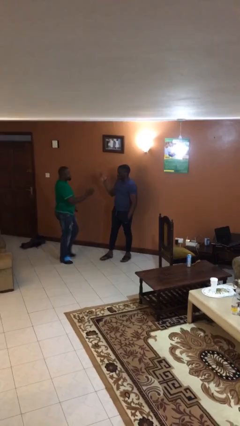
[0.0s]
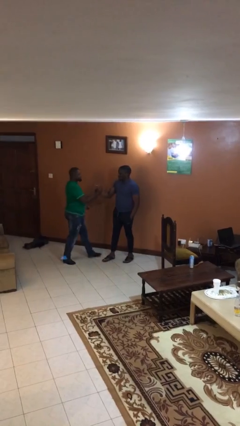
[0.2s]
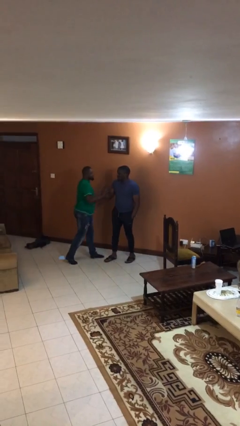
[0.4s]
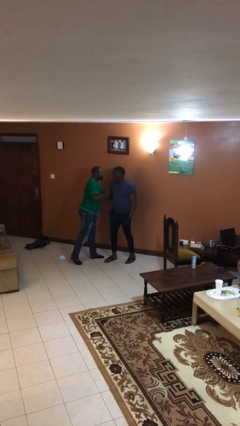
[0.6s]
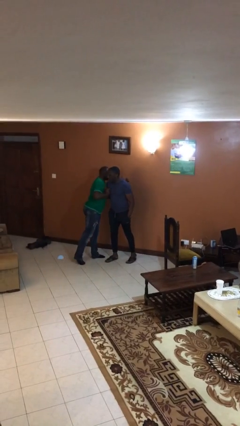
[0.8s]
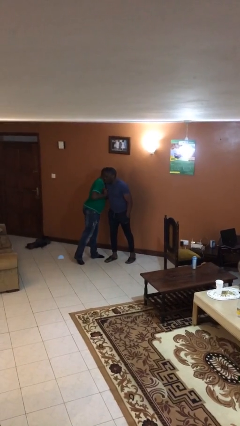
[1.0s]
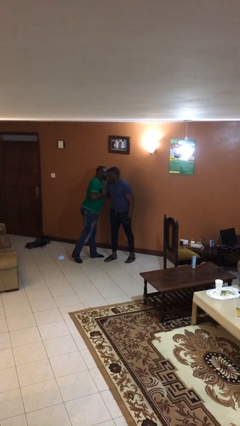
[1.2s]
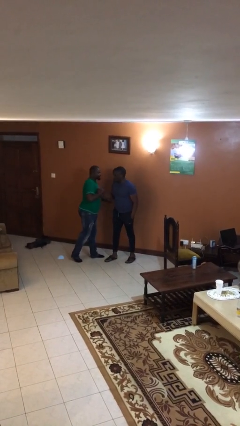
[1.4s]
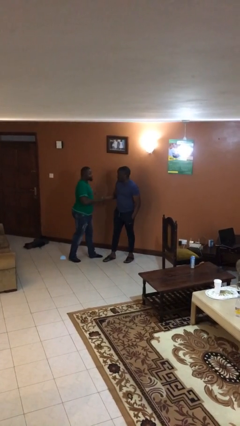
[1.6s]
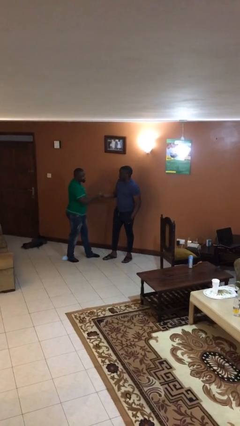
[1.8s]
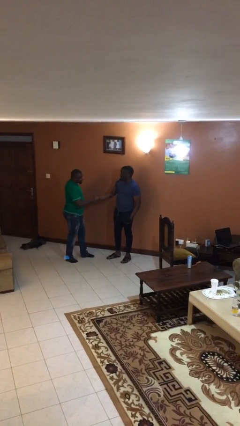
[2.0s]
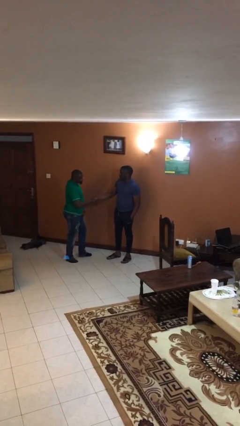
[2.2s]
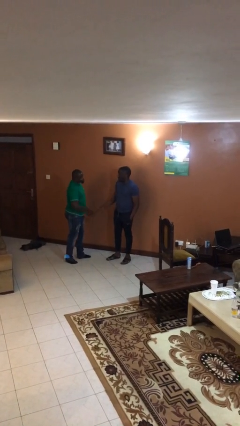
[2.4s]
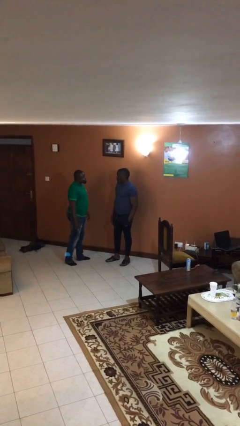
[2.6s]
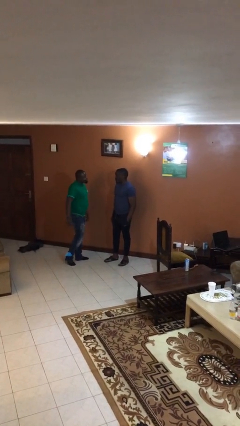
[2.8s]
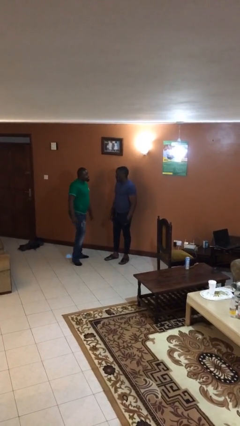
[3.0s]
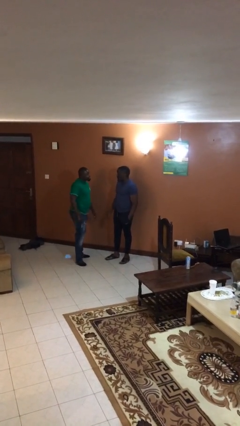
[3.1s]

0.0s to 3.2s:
person embraces person

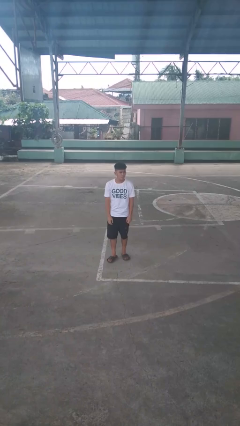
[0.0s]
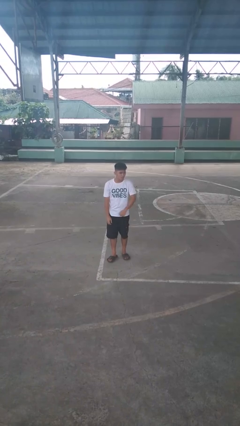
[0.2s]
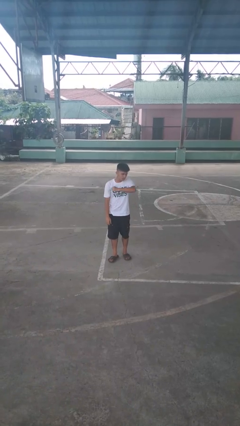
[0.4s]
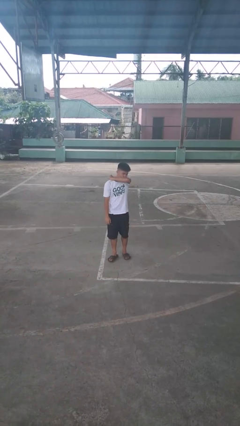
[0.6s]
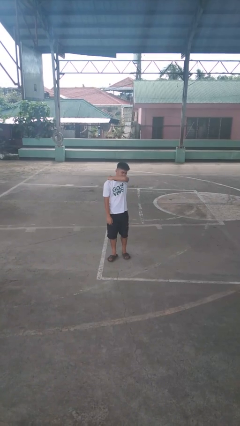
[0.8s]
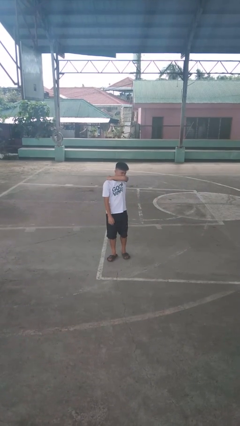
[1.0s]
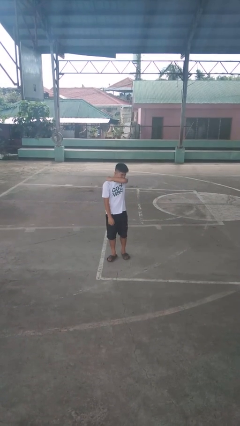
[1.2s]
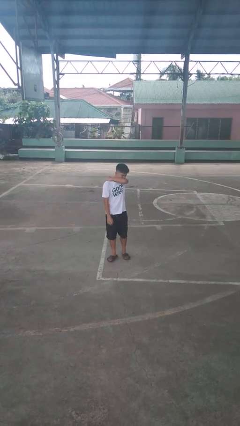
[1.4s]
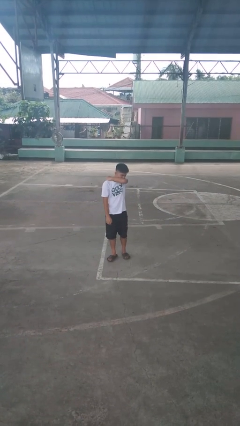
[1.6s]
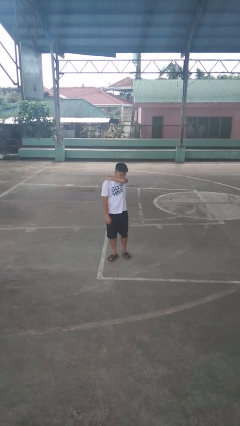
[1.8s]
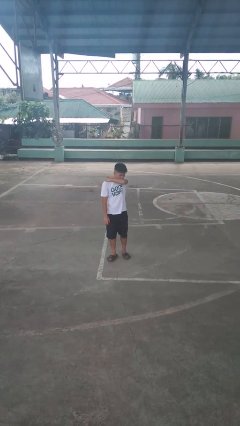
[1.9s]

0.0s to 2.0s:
person sneezes into arm

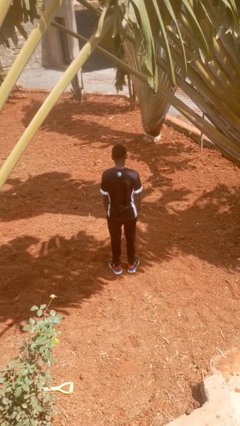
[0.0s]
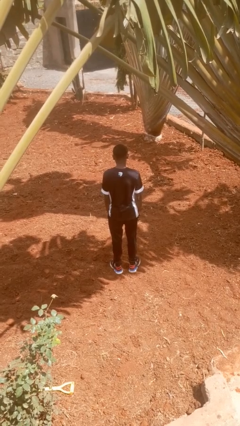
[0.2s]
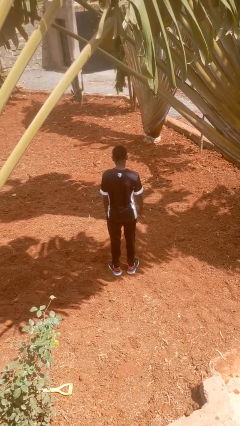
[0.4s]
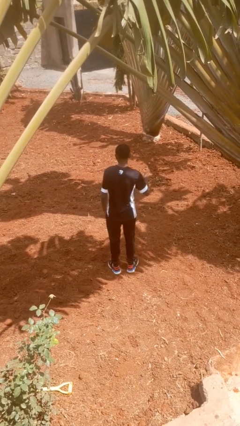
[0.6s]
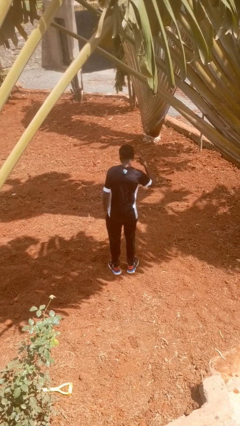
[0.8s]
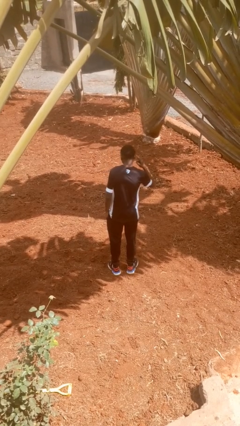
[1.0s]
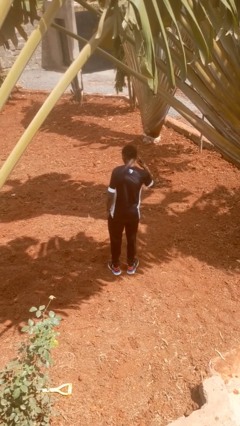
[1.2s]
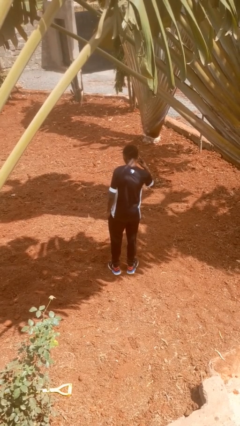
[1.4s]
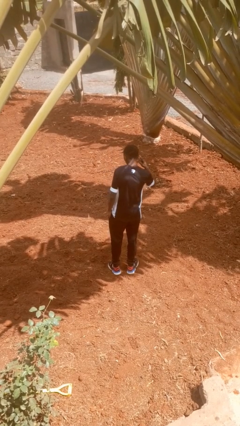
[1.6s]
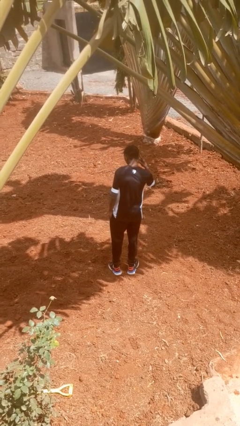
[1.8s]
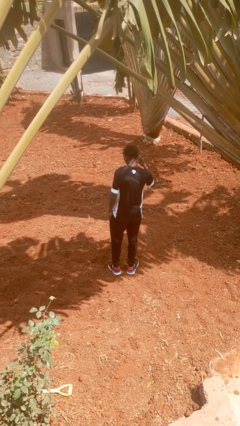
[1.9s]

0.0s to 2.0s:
person gestures listen closely

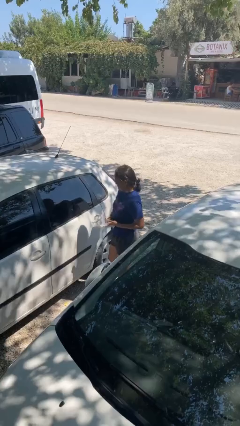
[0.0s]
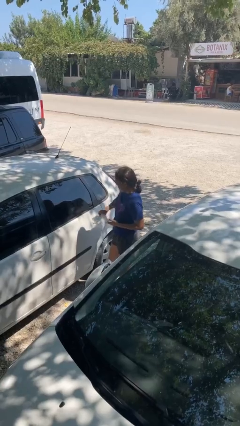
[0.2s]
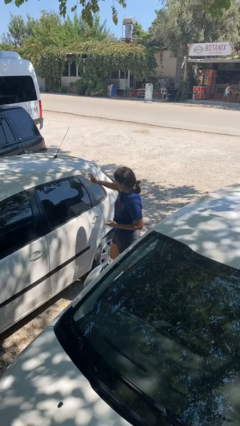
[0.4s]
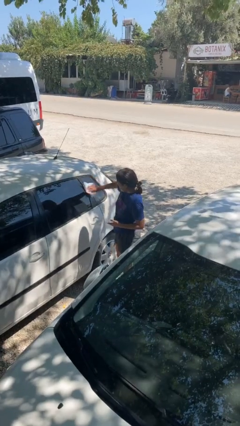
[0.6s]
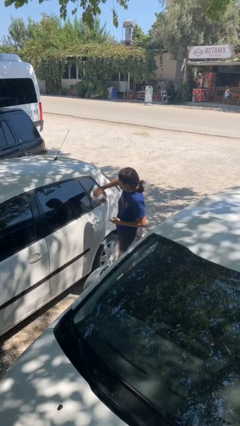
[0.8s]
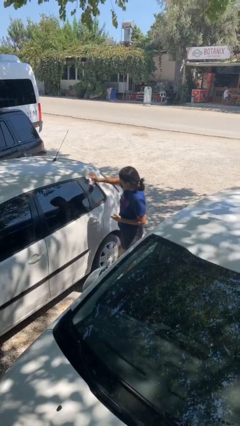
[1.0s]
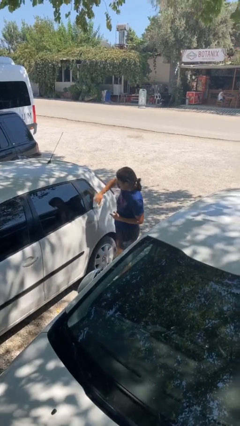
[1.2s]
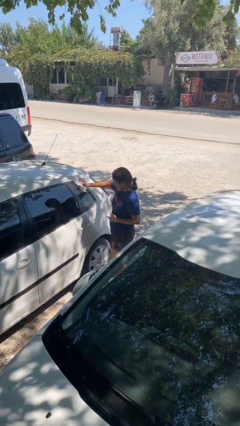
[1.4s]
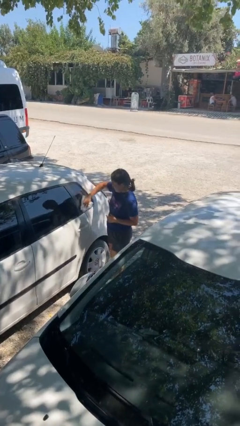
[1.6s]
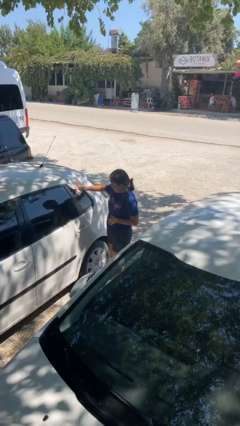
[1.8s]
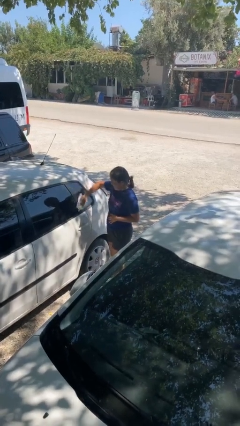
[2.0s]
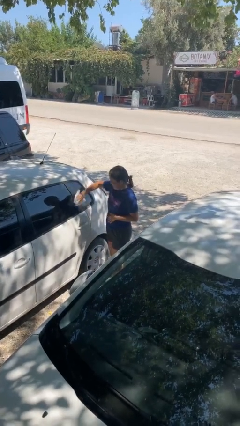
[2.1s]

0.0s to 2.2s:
person polishes car with rag

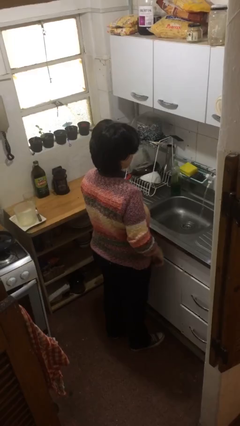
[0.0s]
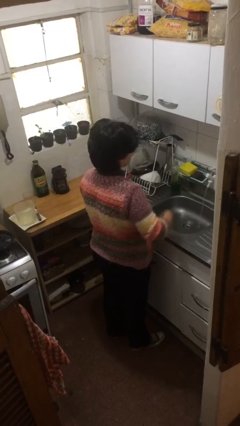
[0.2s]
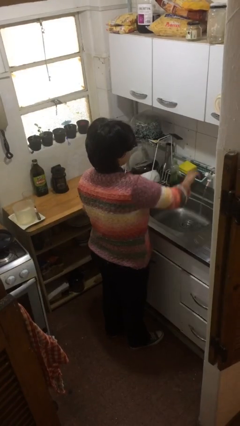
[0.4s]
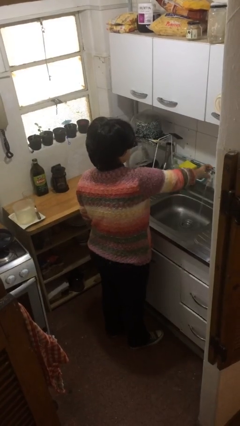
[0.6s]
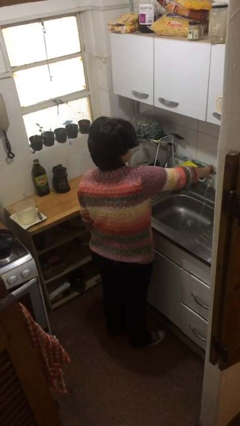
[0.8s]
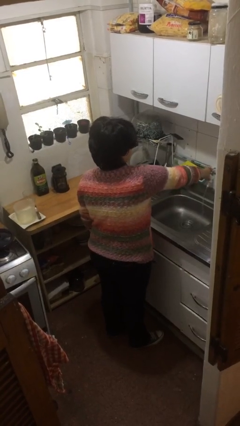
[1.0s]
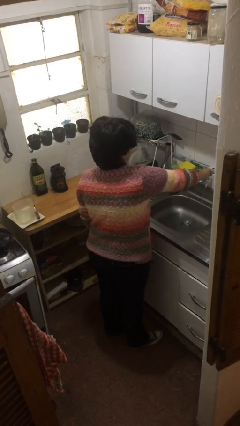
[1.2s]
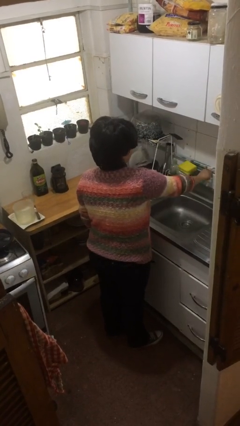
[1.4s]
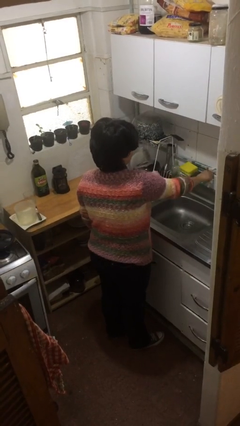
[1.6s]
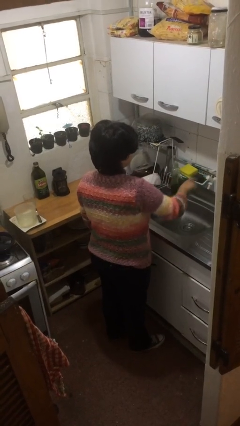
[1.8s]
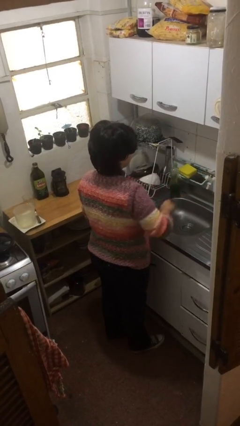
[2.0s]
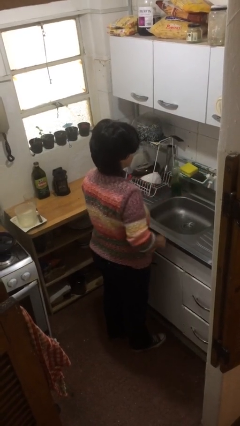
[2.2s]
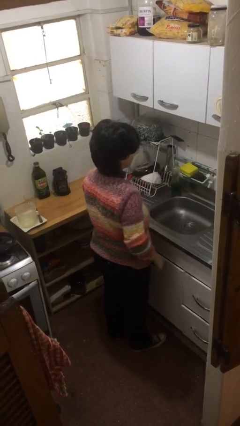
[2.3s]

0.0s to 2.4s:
person turns off faucet

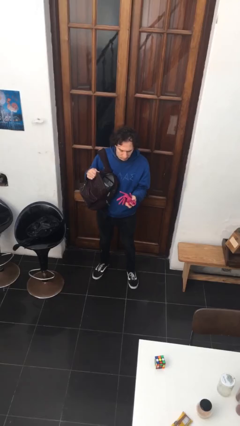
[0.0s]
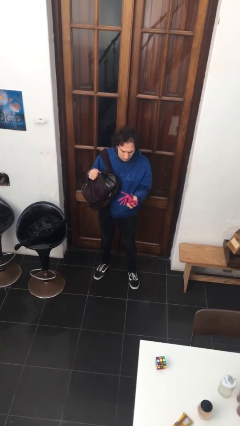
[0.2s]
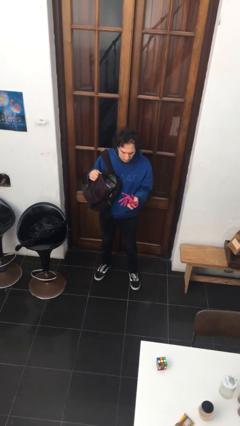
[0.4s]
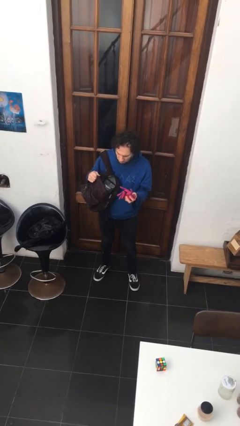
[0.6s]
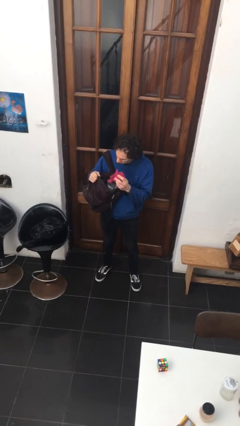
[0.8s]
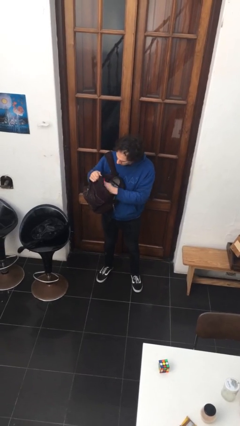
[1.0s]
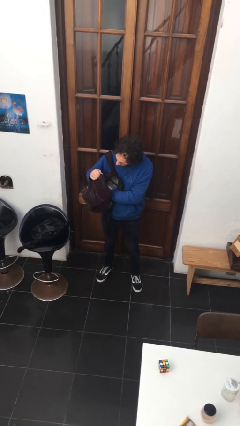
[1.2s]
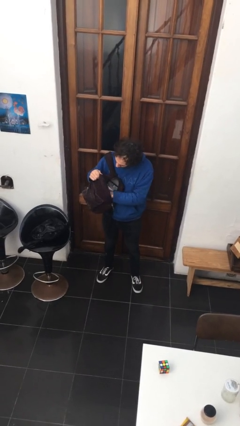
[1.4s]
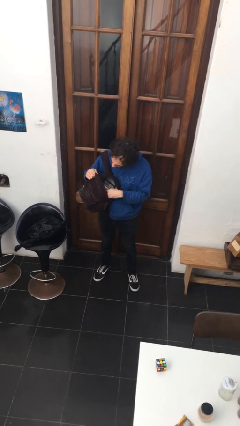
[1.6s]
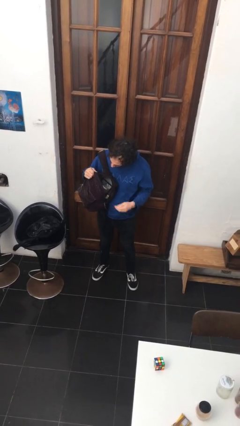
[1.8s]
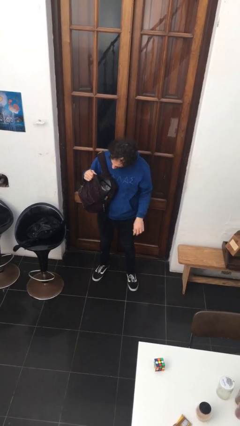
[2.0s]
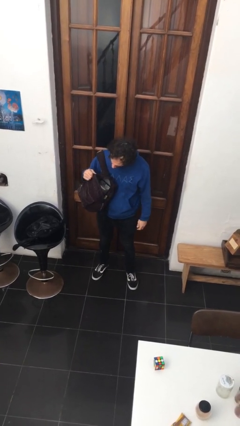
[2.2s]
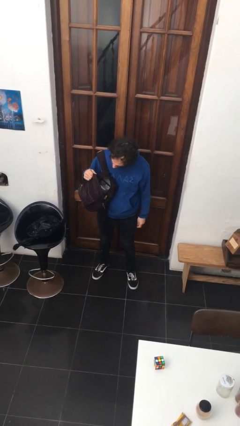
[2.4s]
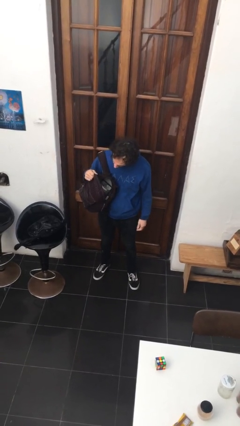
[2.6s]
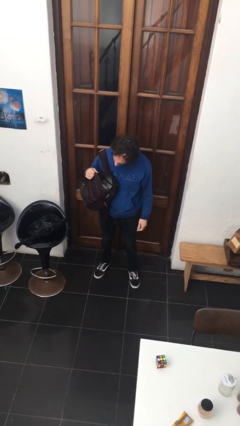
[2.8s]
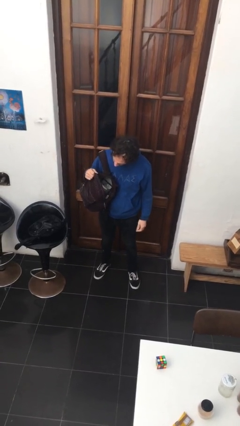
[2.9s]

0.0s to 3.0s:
person puts object into backpack

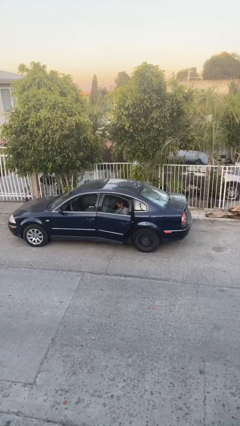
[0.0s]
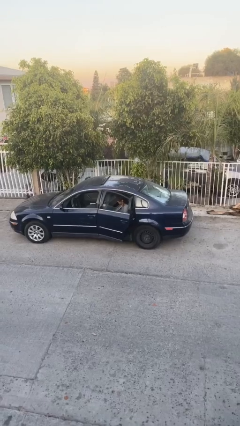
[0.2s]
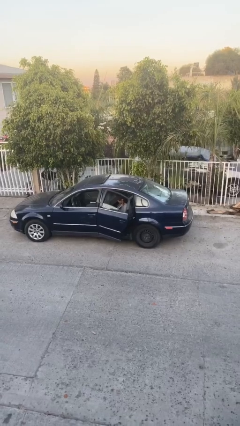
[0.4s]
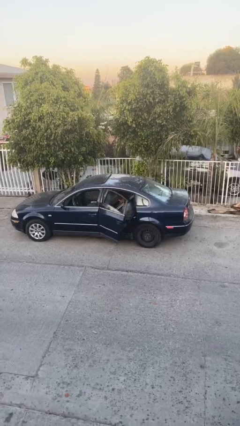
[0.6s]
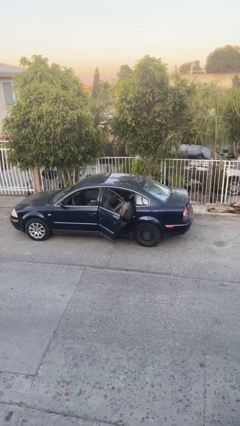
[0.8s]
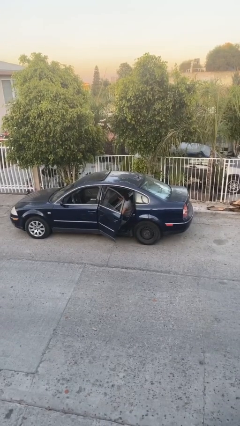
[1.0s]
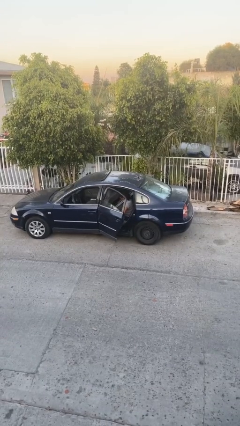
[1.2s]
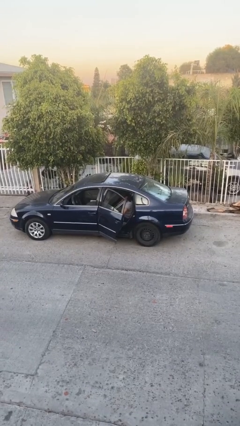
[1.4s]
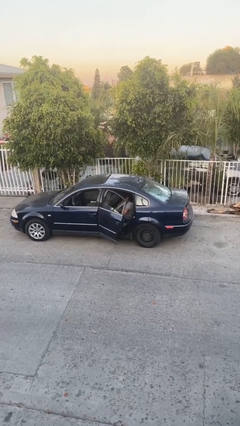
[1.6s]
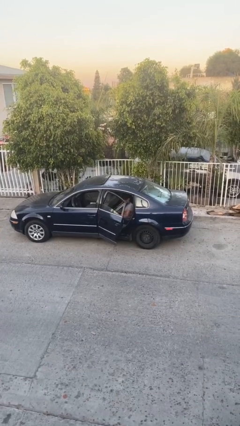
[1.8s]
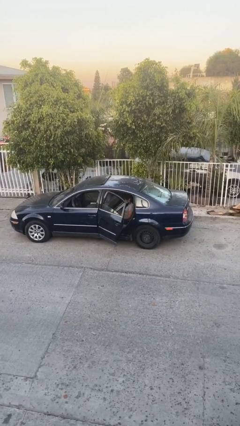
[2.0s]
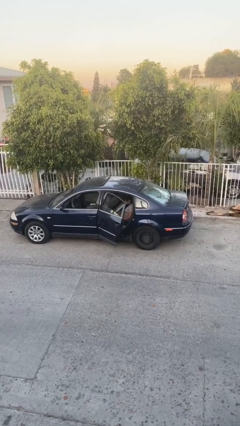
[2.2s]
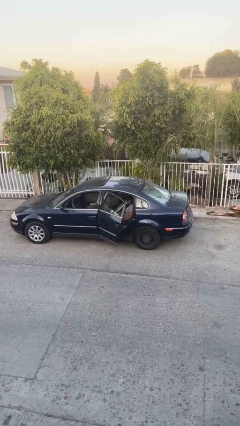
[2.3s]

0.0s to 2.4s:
person opens car door
